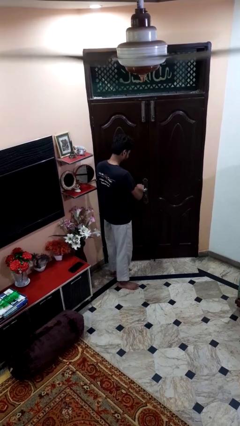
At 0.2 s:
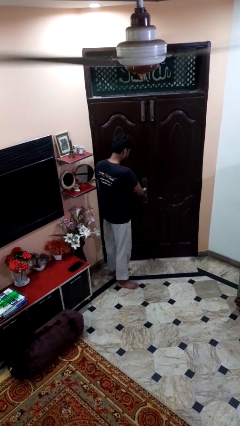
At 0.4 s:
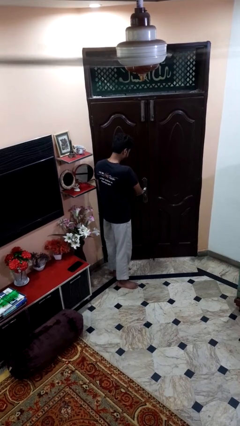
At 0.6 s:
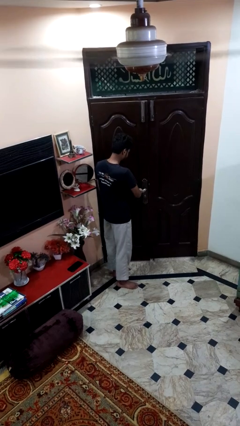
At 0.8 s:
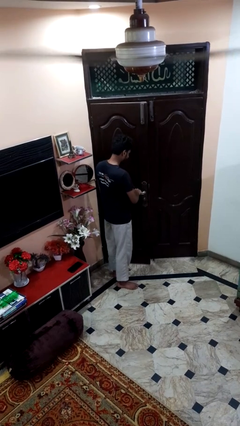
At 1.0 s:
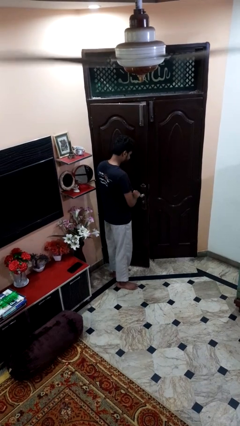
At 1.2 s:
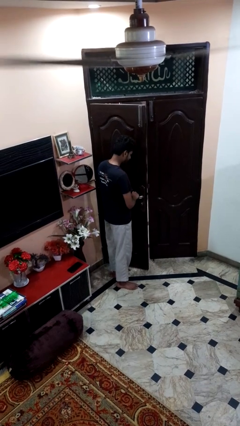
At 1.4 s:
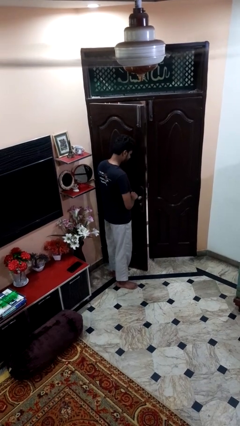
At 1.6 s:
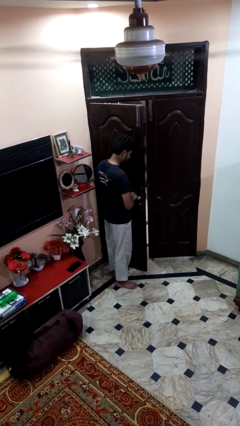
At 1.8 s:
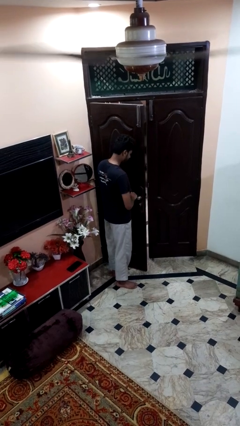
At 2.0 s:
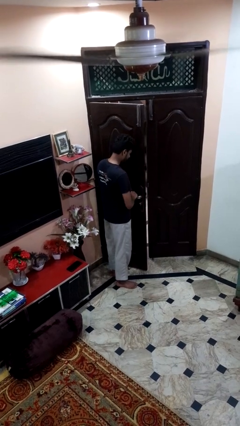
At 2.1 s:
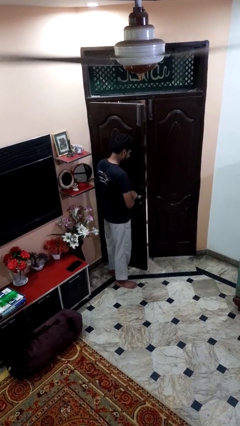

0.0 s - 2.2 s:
person opens facility door

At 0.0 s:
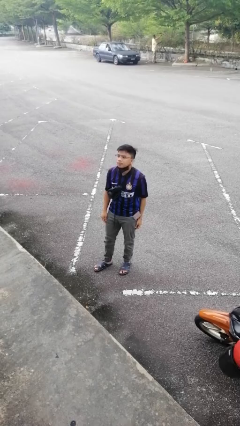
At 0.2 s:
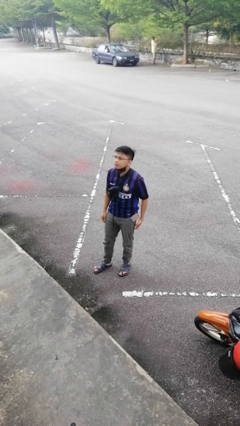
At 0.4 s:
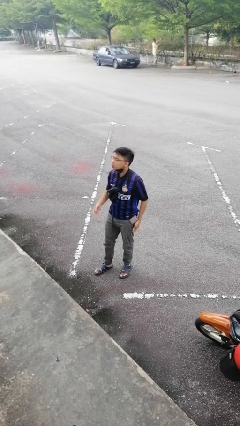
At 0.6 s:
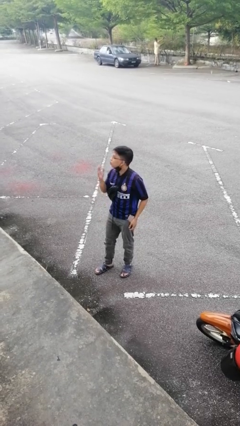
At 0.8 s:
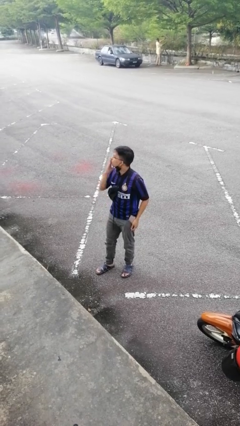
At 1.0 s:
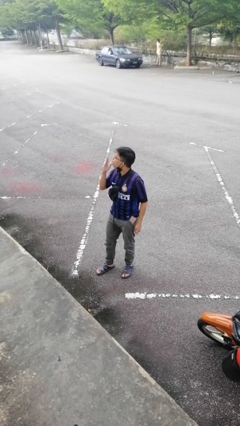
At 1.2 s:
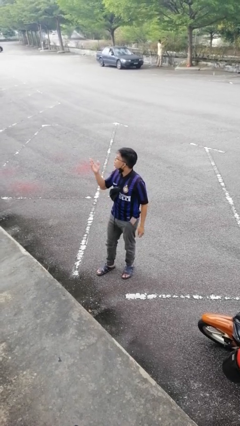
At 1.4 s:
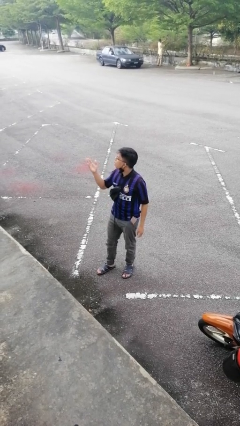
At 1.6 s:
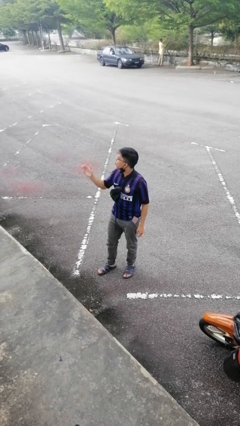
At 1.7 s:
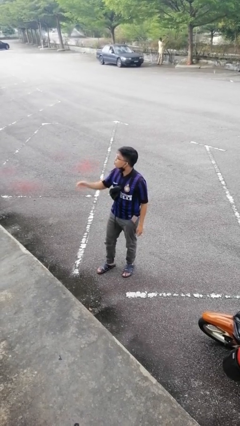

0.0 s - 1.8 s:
person gestures blow kiss

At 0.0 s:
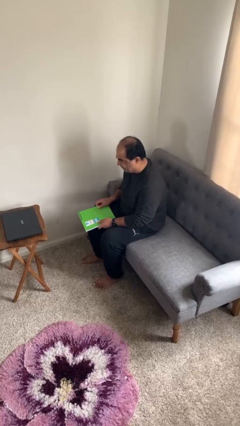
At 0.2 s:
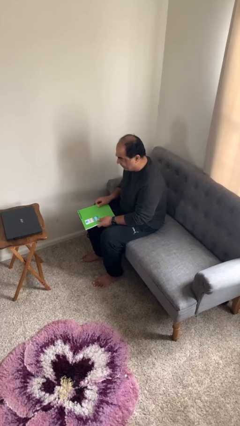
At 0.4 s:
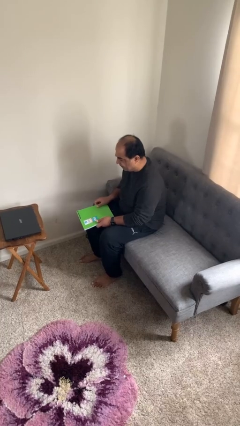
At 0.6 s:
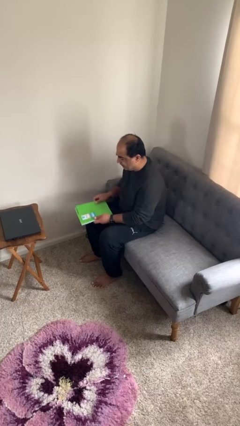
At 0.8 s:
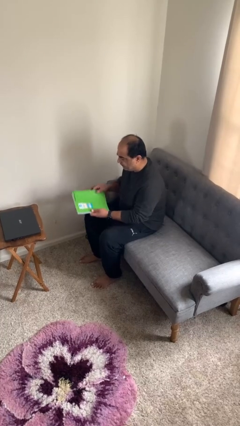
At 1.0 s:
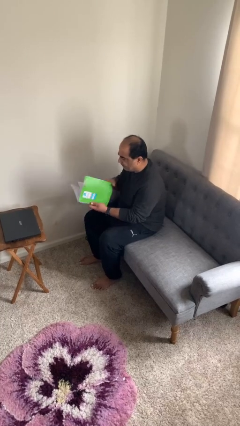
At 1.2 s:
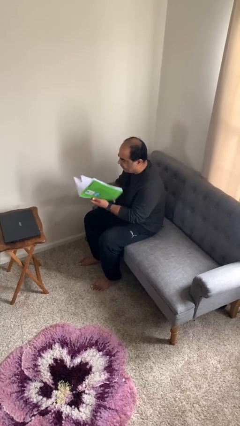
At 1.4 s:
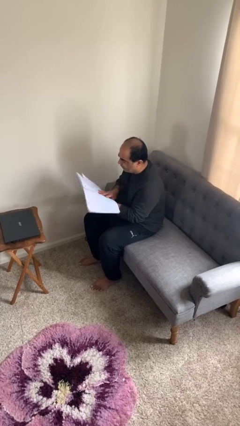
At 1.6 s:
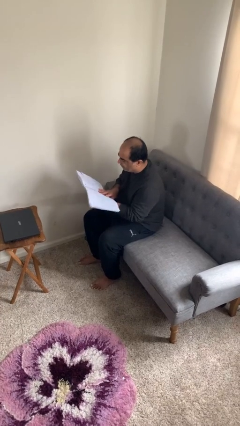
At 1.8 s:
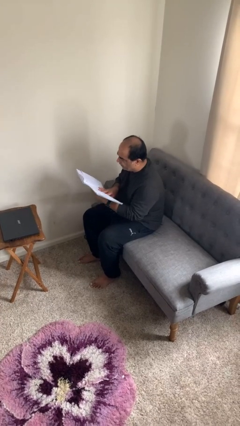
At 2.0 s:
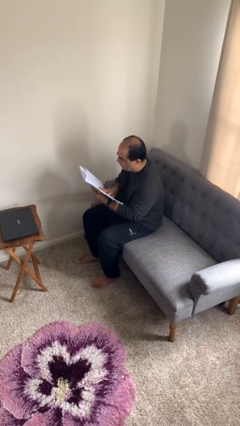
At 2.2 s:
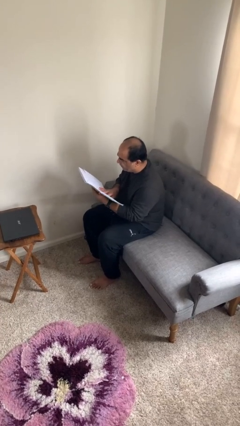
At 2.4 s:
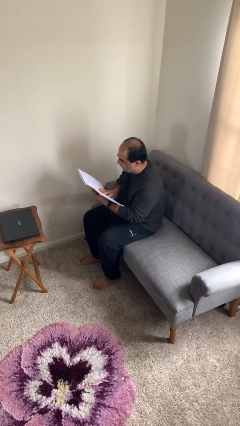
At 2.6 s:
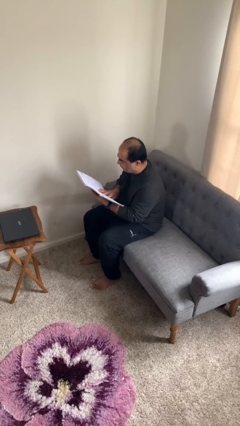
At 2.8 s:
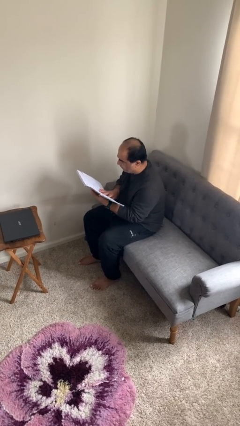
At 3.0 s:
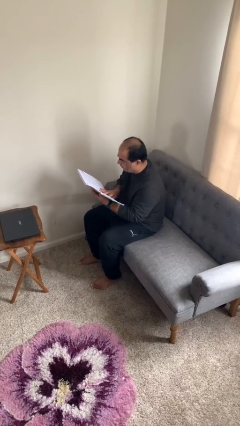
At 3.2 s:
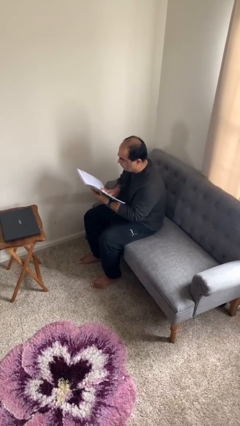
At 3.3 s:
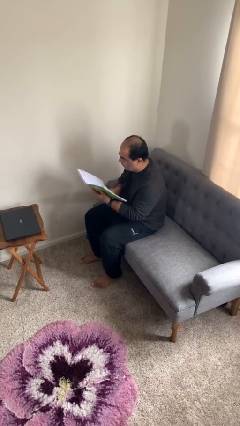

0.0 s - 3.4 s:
person reads document

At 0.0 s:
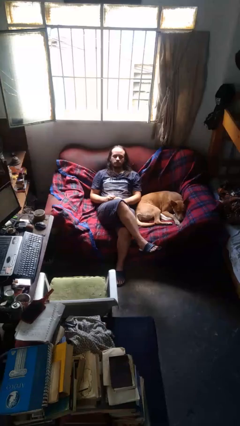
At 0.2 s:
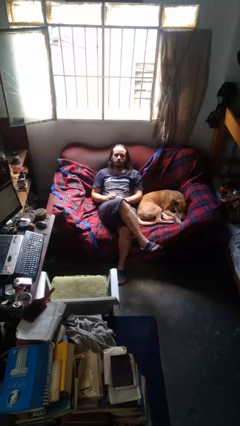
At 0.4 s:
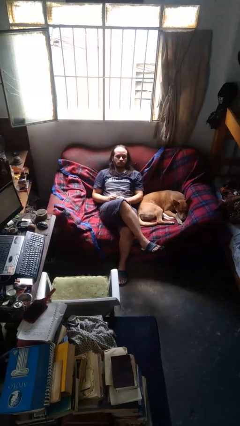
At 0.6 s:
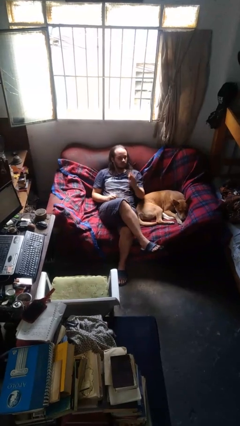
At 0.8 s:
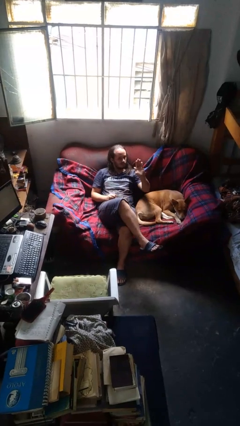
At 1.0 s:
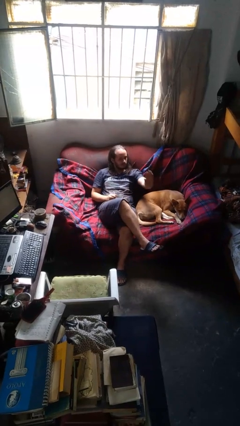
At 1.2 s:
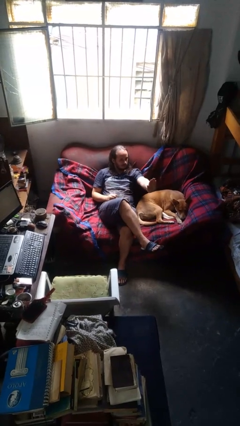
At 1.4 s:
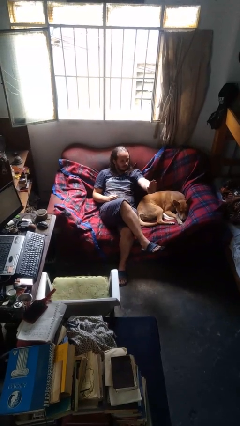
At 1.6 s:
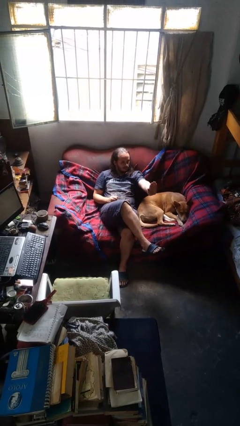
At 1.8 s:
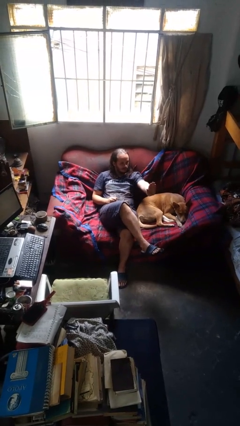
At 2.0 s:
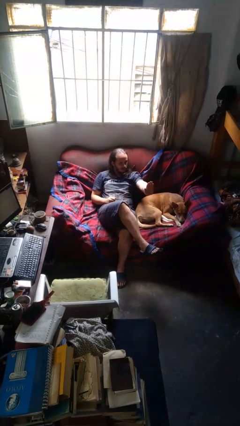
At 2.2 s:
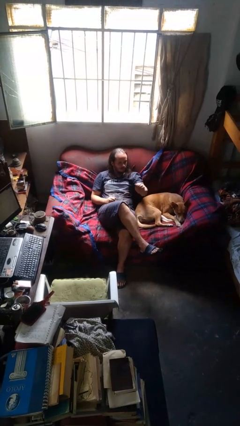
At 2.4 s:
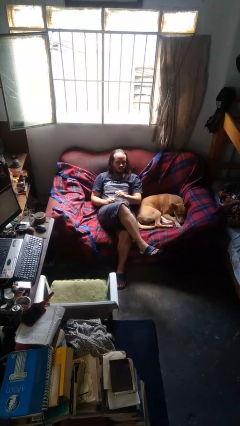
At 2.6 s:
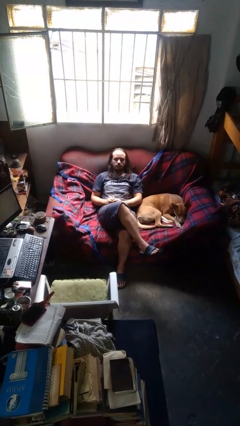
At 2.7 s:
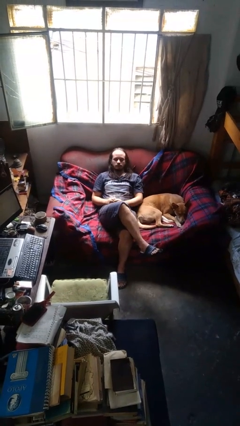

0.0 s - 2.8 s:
person gestures stop

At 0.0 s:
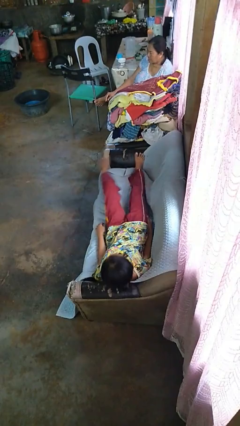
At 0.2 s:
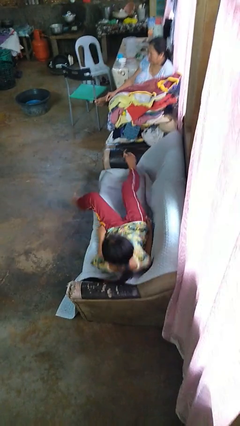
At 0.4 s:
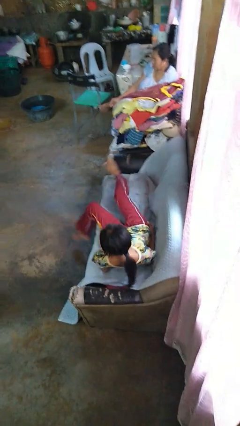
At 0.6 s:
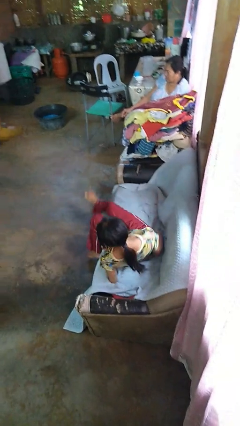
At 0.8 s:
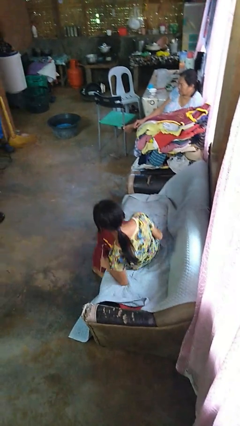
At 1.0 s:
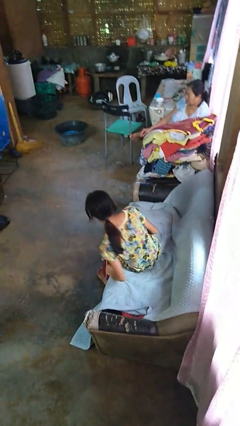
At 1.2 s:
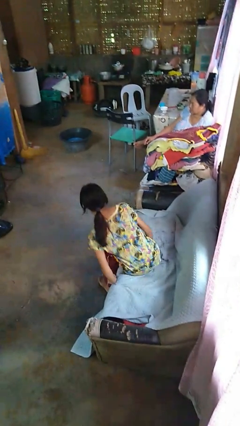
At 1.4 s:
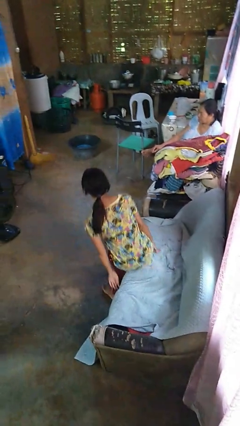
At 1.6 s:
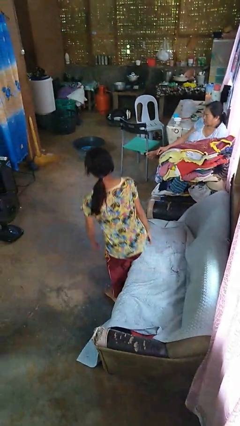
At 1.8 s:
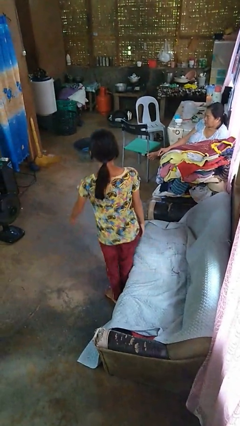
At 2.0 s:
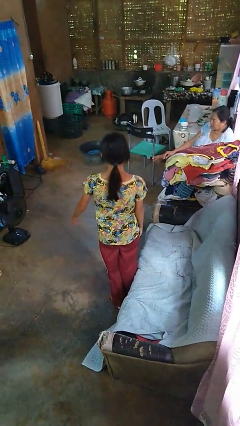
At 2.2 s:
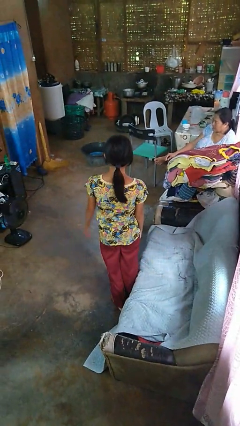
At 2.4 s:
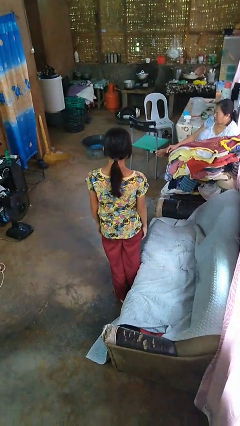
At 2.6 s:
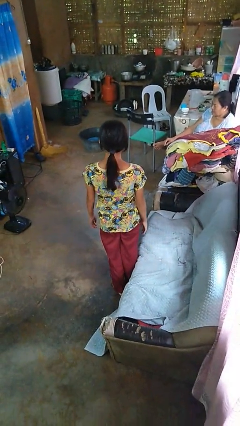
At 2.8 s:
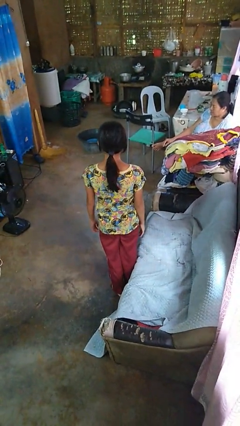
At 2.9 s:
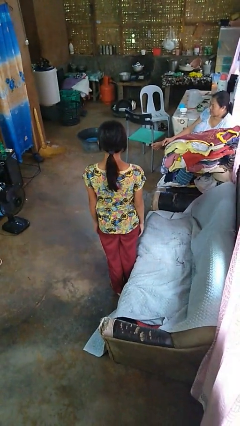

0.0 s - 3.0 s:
person stands up

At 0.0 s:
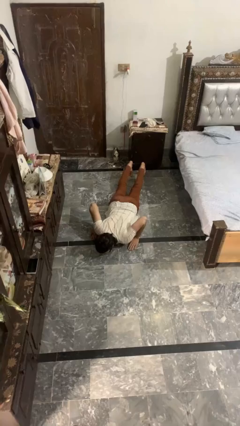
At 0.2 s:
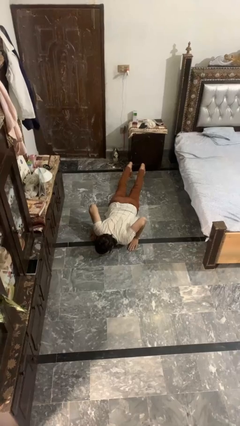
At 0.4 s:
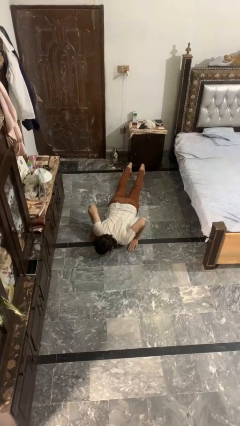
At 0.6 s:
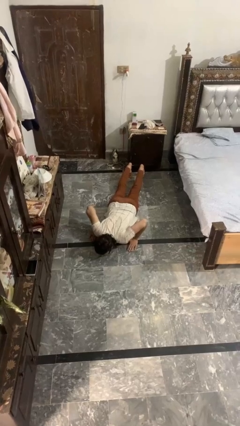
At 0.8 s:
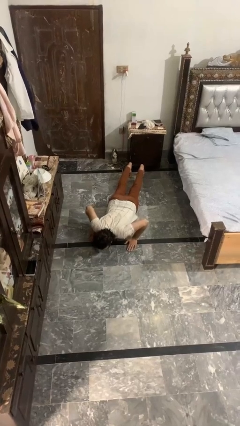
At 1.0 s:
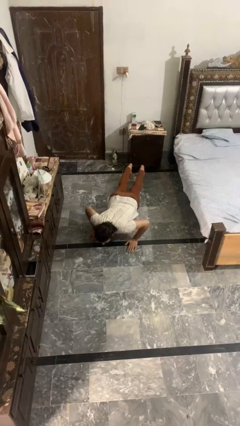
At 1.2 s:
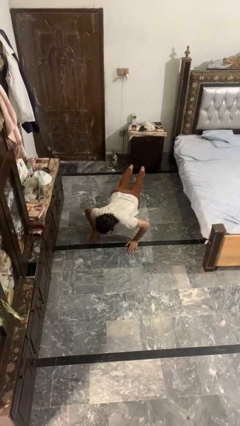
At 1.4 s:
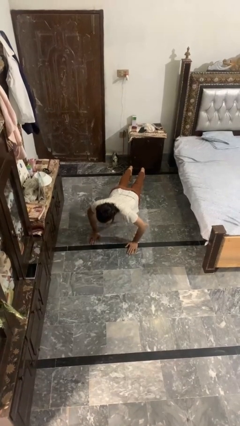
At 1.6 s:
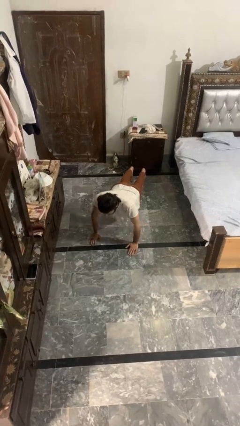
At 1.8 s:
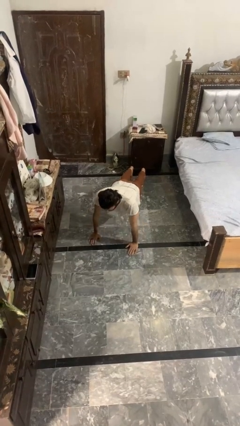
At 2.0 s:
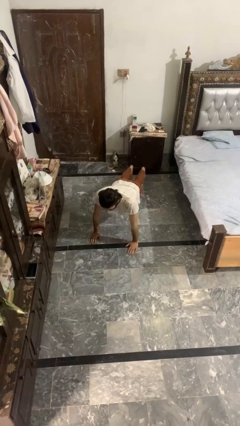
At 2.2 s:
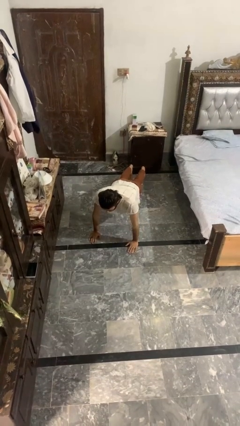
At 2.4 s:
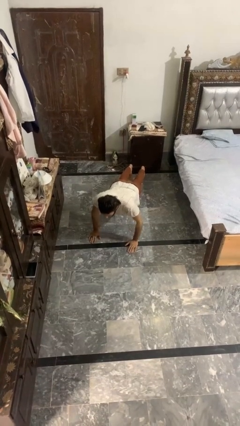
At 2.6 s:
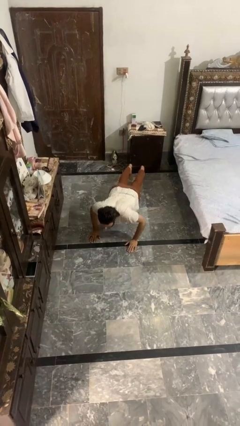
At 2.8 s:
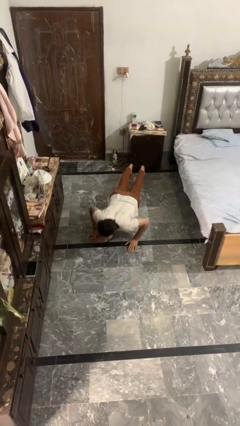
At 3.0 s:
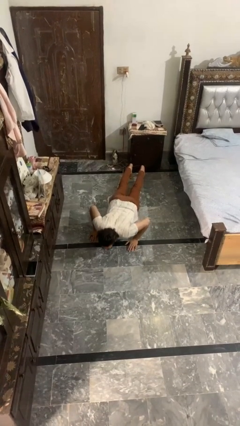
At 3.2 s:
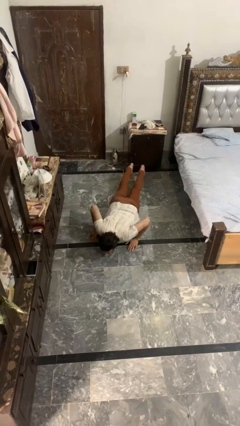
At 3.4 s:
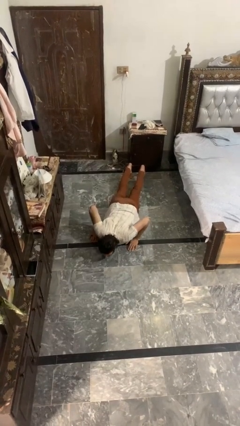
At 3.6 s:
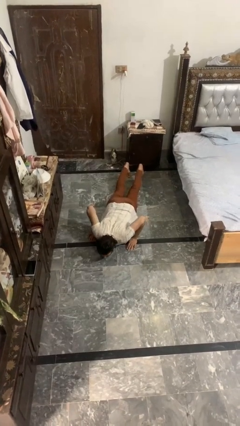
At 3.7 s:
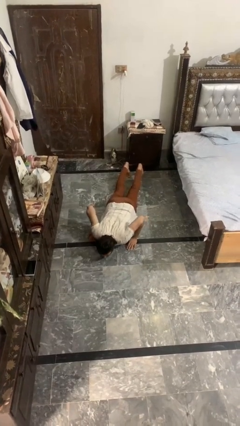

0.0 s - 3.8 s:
person exercises with pushup
